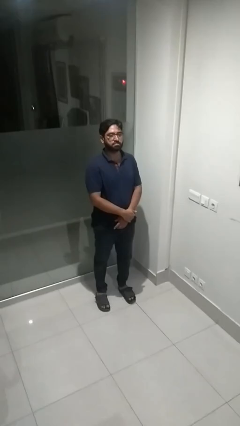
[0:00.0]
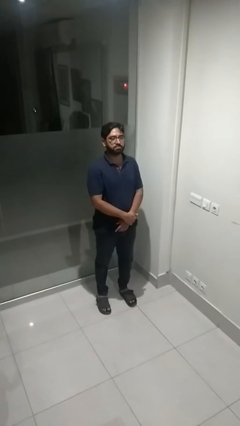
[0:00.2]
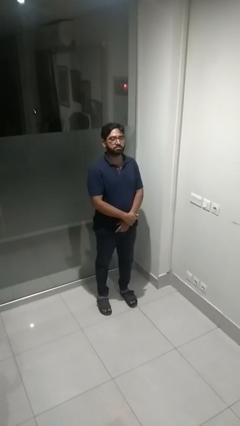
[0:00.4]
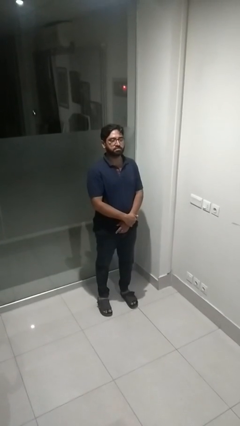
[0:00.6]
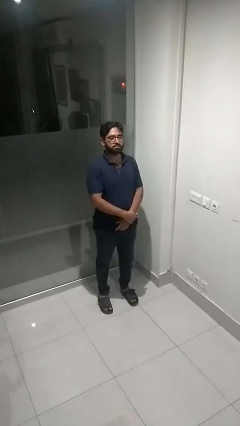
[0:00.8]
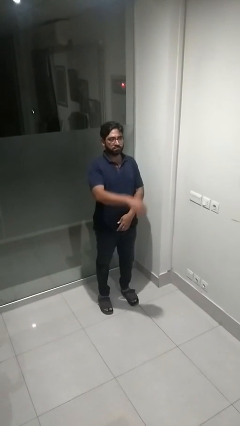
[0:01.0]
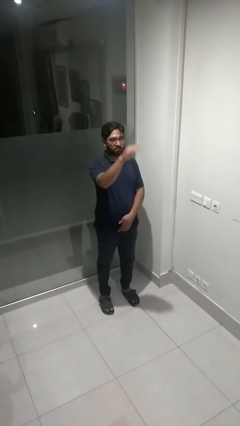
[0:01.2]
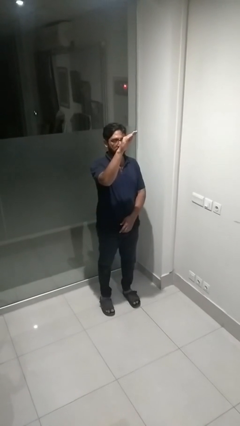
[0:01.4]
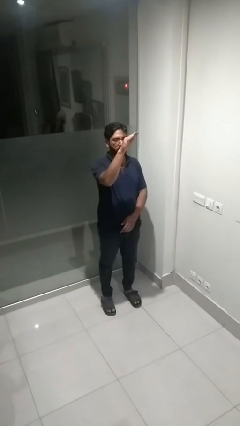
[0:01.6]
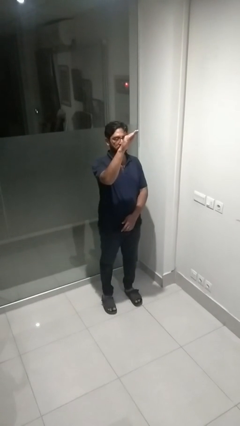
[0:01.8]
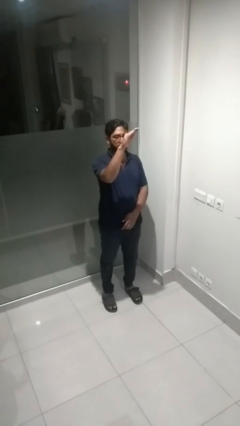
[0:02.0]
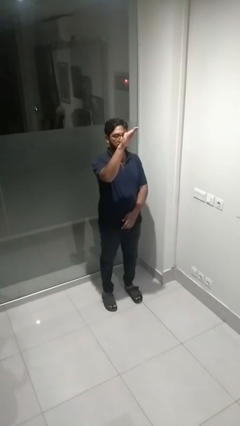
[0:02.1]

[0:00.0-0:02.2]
person gestures swipe up

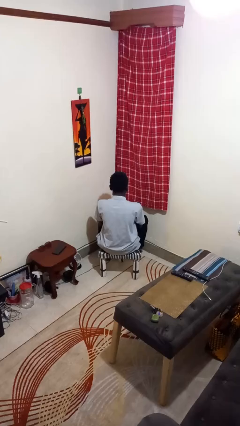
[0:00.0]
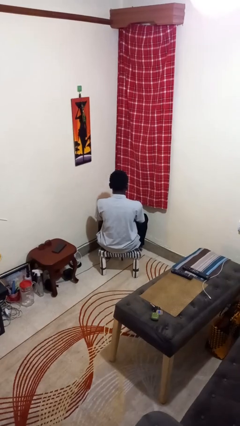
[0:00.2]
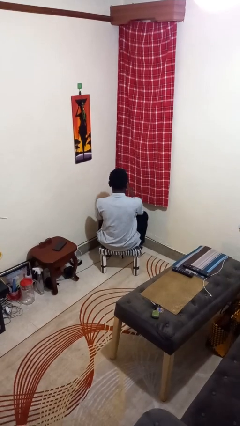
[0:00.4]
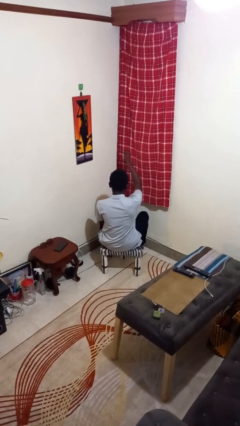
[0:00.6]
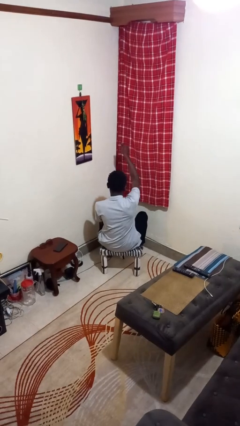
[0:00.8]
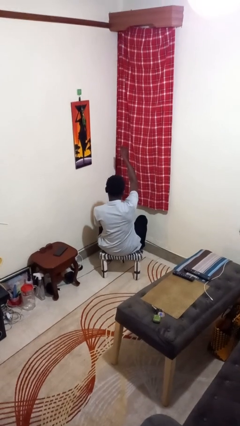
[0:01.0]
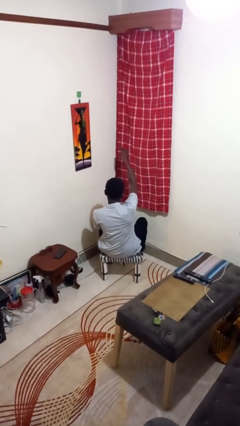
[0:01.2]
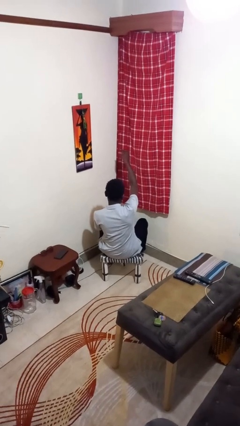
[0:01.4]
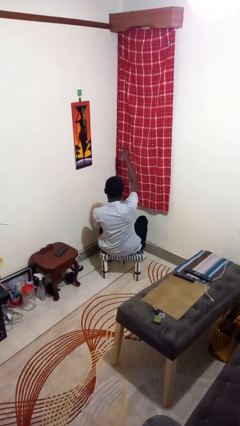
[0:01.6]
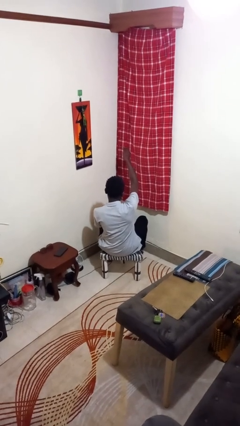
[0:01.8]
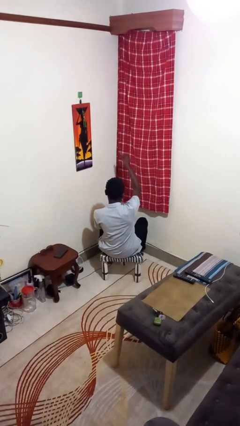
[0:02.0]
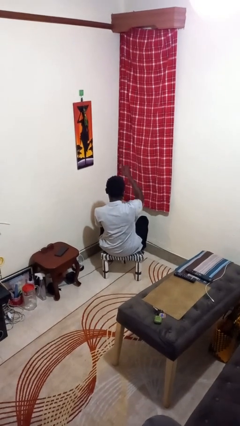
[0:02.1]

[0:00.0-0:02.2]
person gestures thumbs up

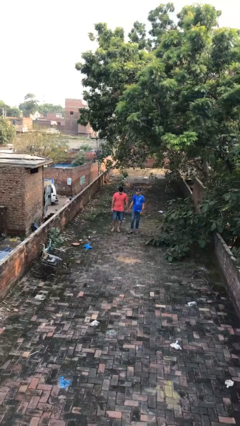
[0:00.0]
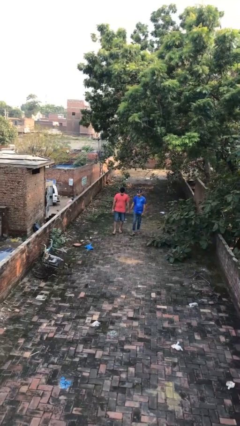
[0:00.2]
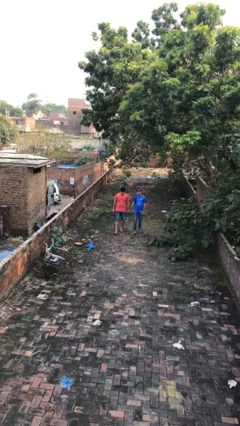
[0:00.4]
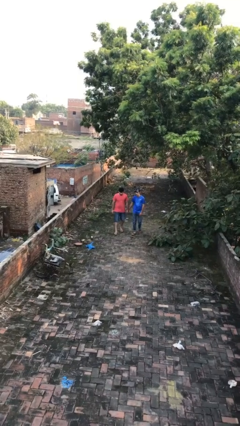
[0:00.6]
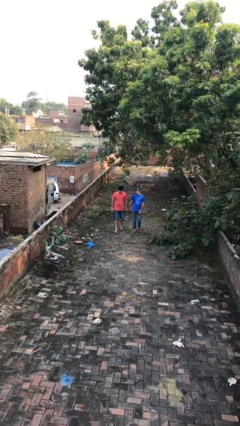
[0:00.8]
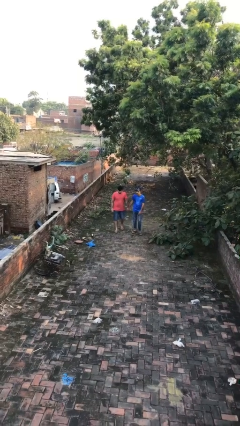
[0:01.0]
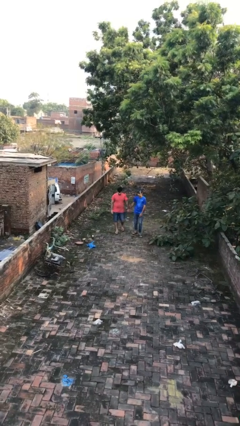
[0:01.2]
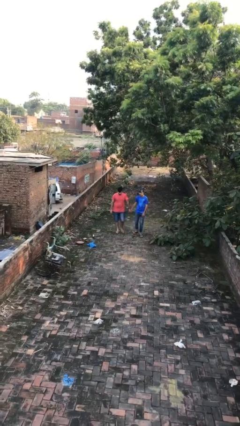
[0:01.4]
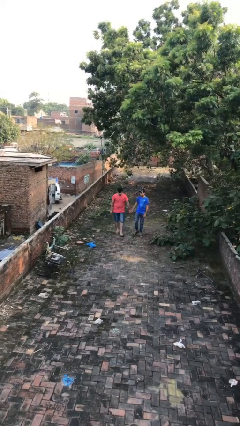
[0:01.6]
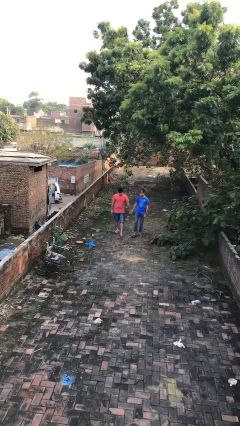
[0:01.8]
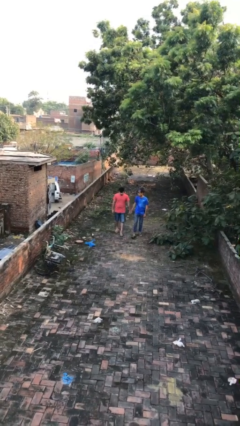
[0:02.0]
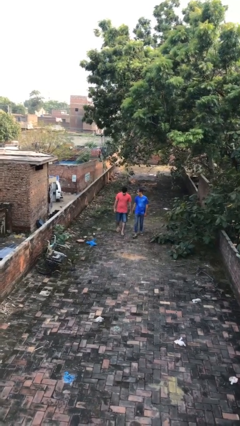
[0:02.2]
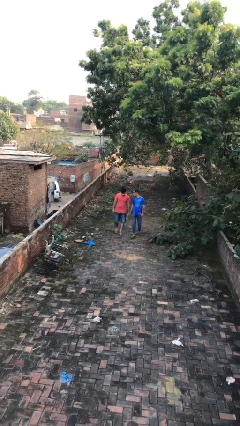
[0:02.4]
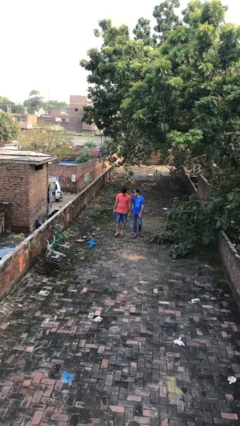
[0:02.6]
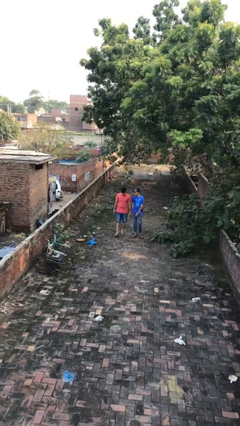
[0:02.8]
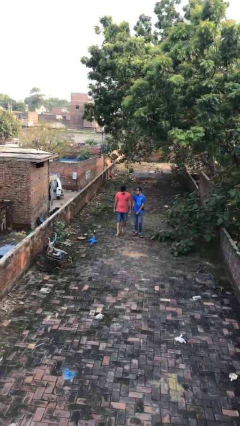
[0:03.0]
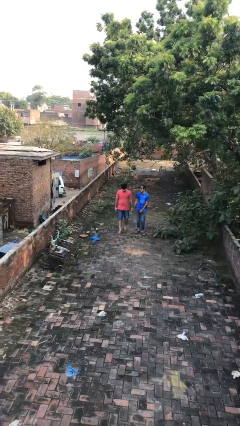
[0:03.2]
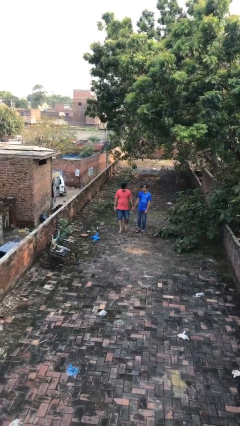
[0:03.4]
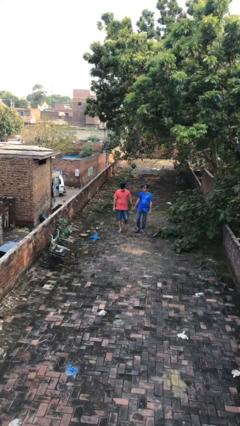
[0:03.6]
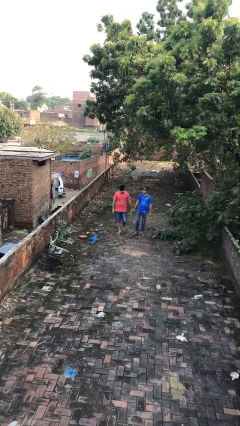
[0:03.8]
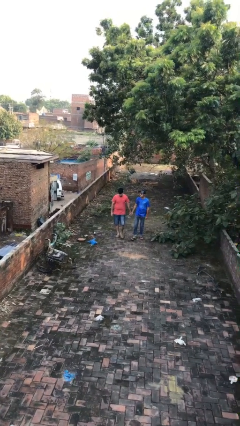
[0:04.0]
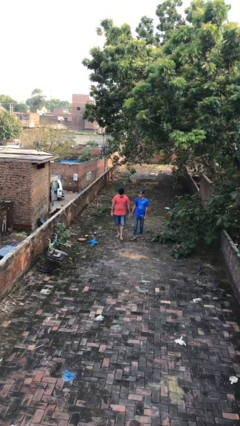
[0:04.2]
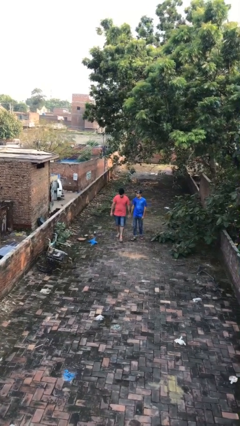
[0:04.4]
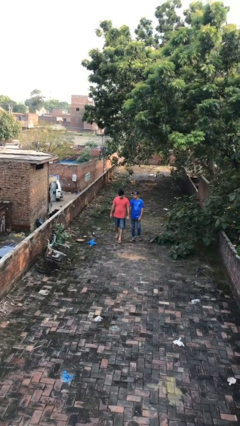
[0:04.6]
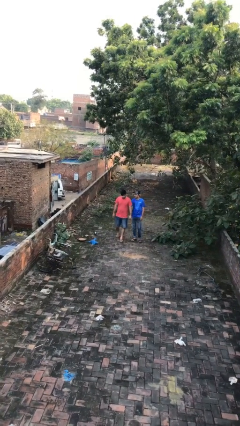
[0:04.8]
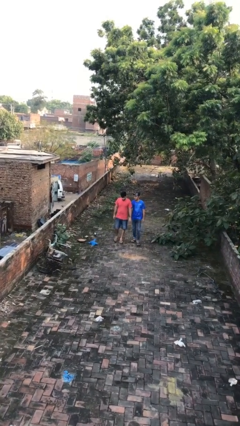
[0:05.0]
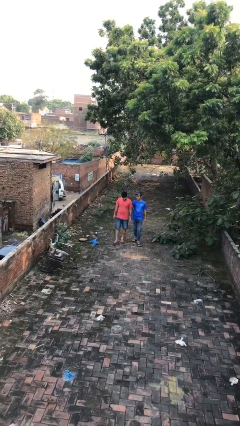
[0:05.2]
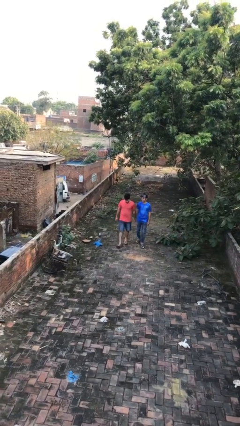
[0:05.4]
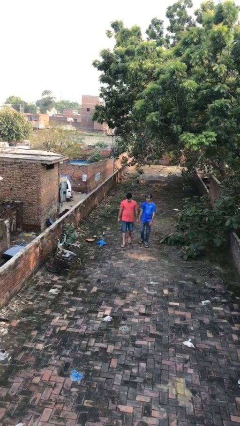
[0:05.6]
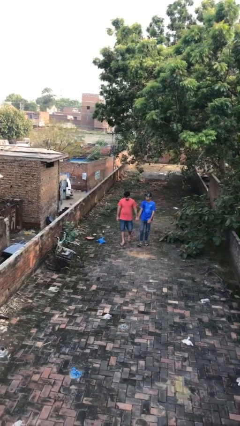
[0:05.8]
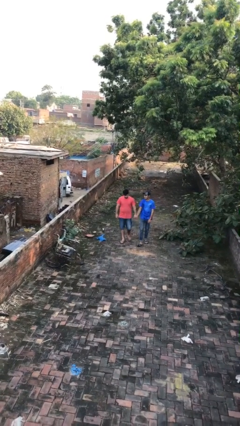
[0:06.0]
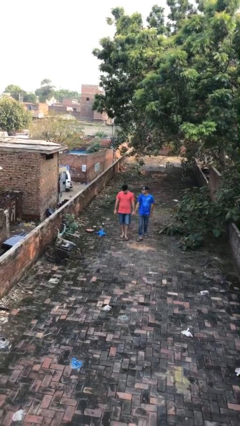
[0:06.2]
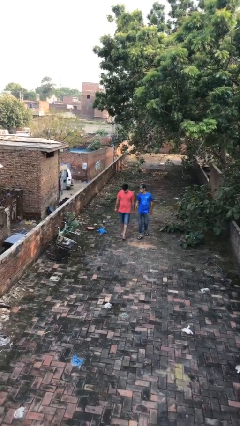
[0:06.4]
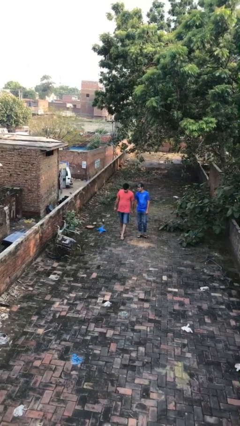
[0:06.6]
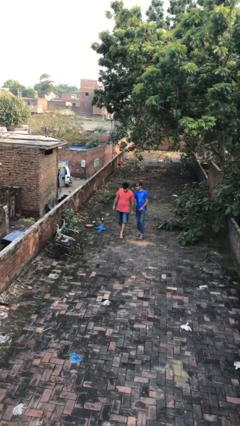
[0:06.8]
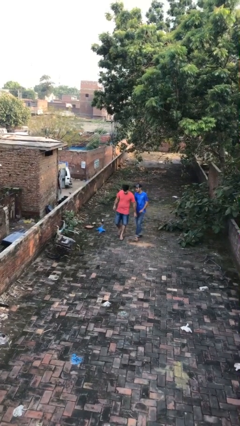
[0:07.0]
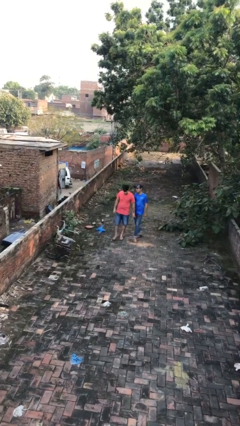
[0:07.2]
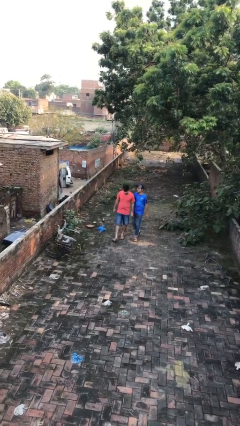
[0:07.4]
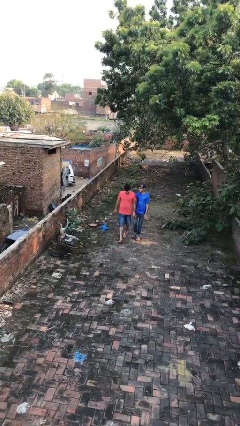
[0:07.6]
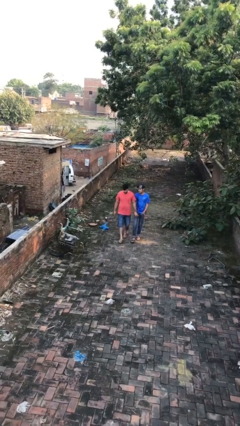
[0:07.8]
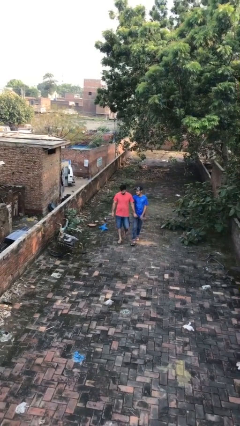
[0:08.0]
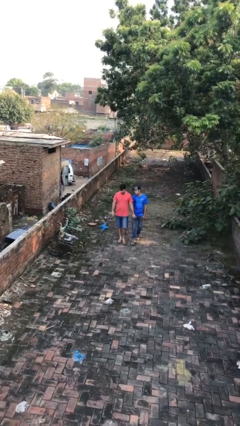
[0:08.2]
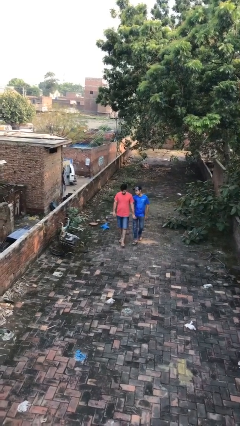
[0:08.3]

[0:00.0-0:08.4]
person holds hand

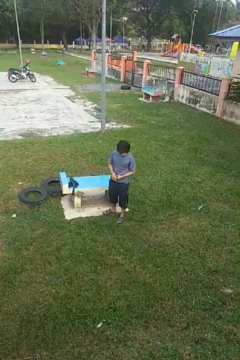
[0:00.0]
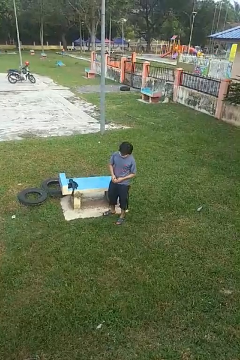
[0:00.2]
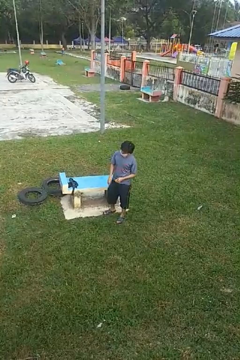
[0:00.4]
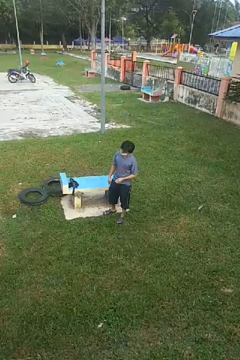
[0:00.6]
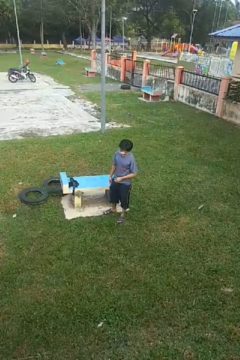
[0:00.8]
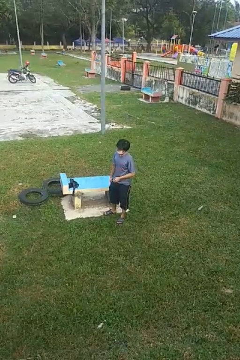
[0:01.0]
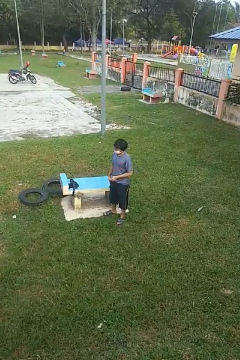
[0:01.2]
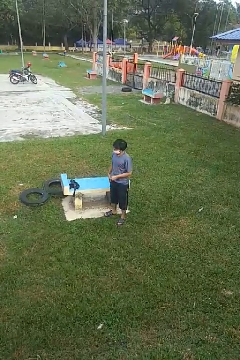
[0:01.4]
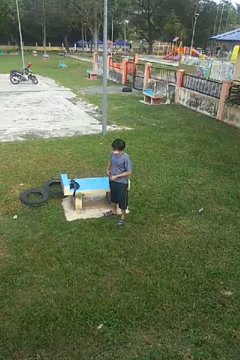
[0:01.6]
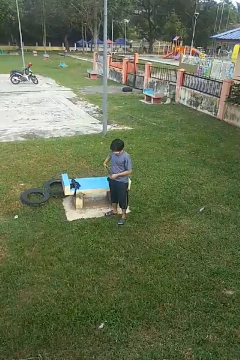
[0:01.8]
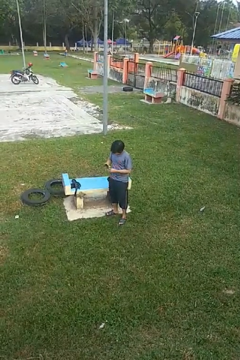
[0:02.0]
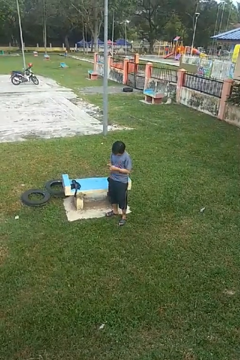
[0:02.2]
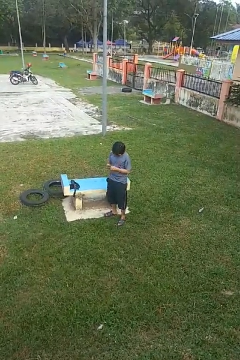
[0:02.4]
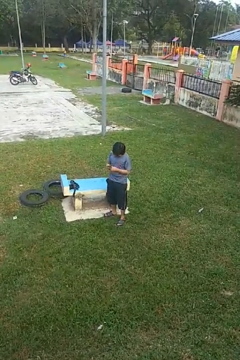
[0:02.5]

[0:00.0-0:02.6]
person takes phone from pocket

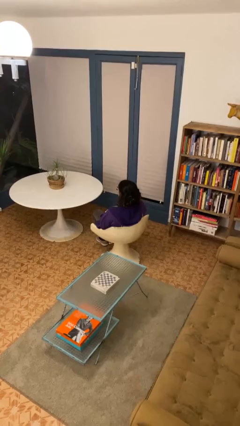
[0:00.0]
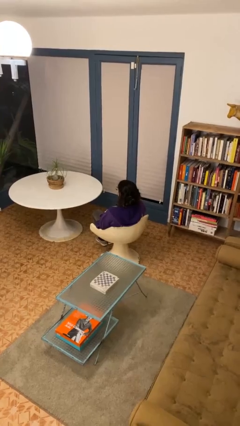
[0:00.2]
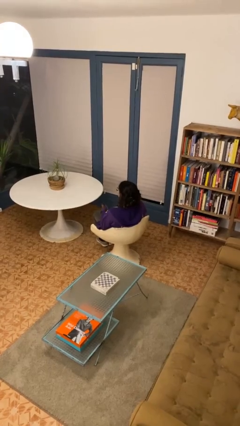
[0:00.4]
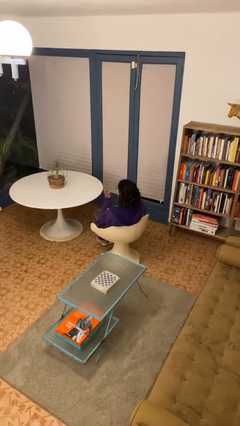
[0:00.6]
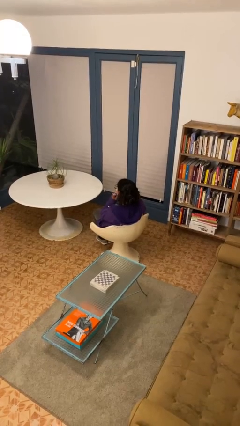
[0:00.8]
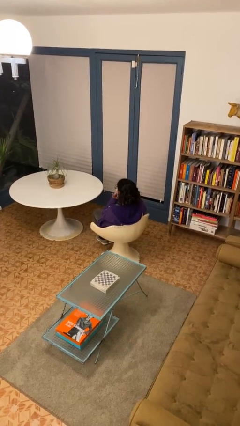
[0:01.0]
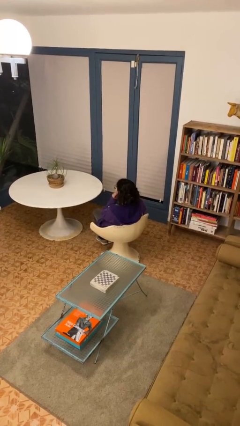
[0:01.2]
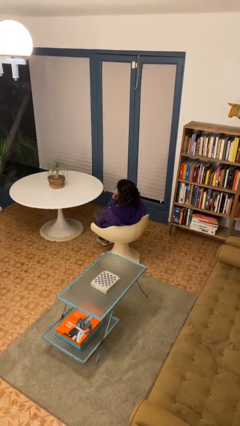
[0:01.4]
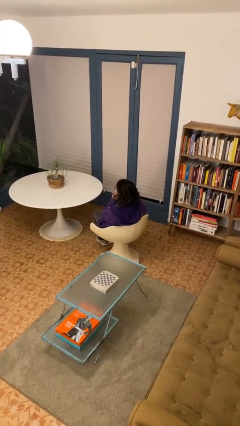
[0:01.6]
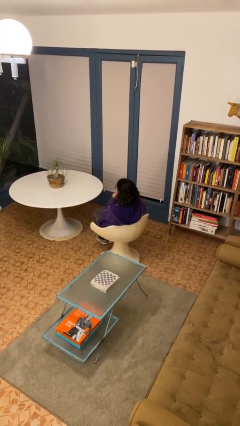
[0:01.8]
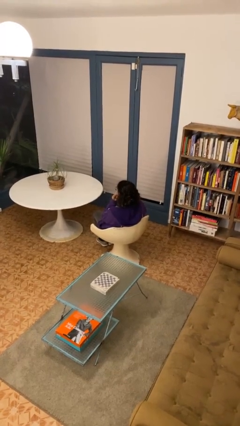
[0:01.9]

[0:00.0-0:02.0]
person gestures listen closely

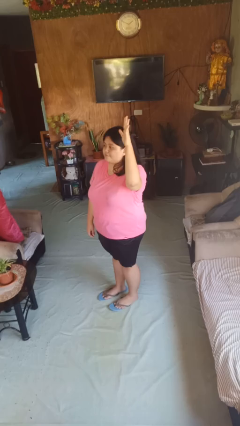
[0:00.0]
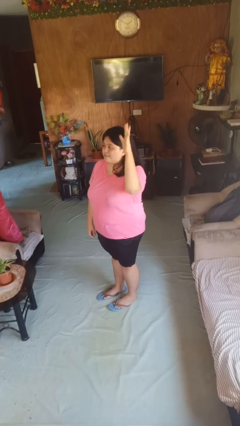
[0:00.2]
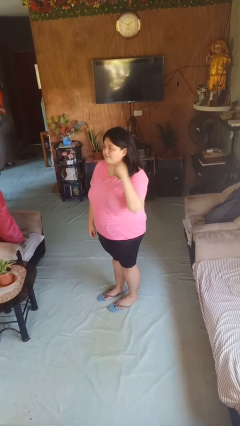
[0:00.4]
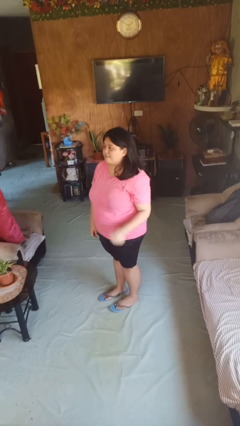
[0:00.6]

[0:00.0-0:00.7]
person gestures lower hand
